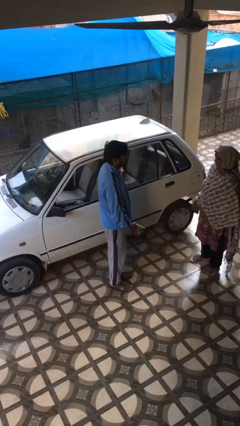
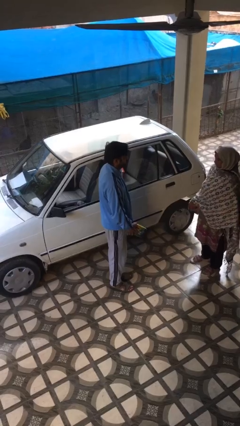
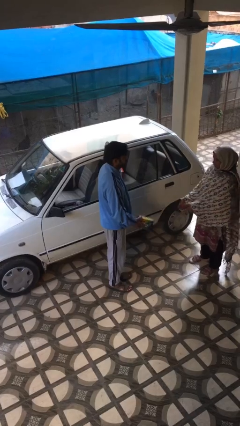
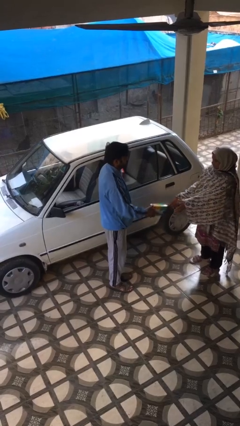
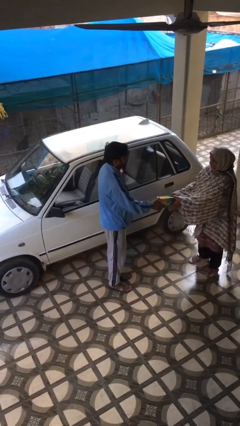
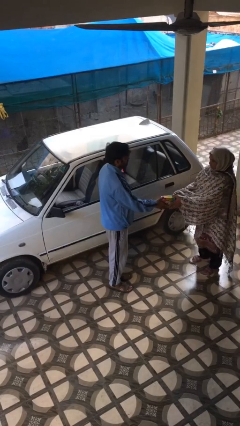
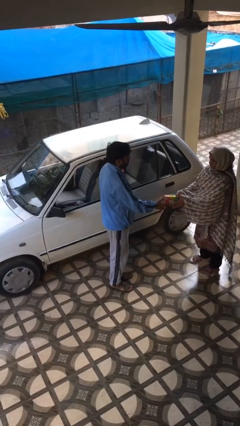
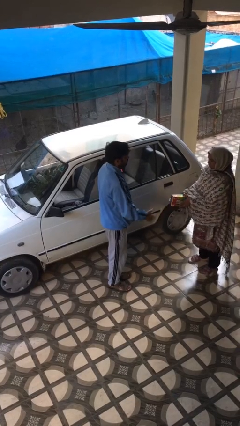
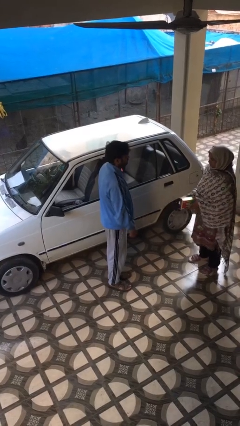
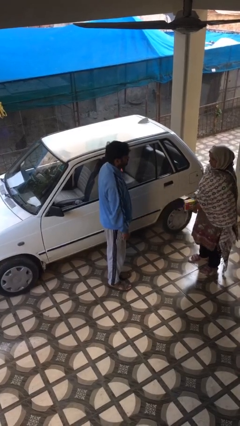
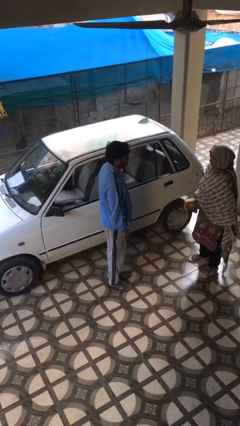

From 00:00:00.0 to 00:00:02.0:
person transfers object to person

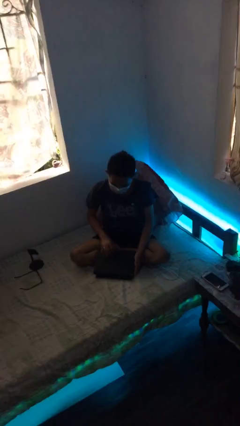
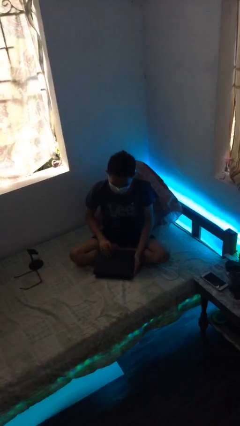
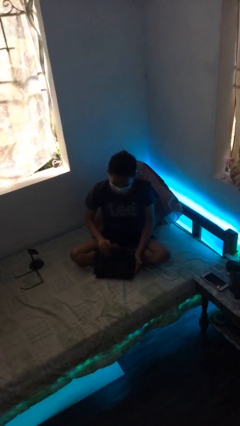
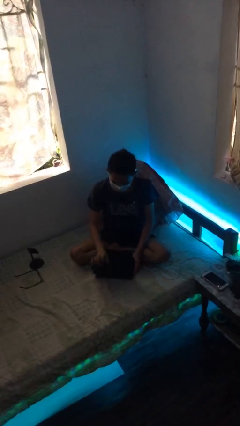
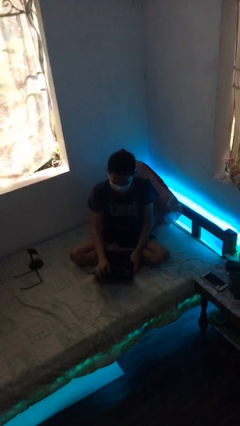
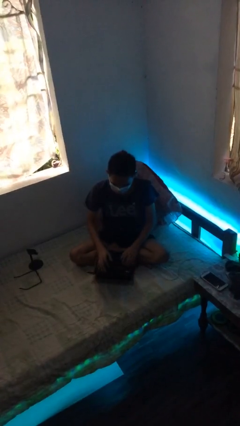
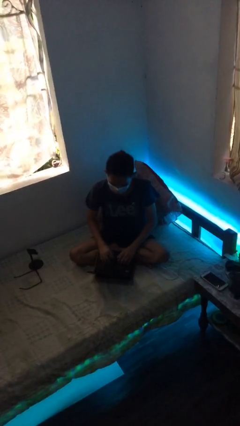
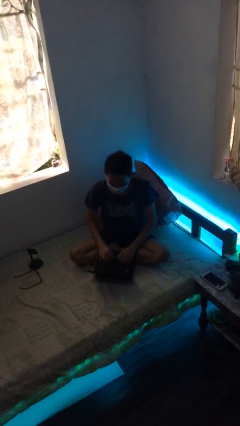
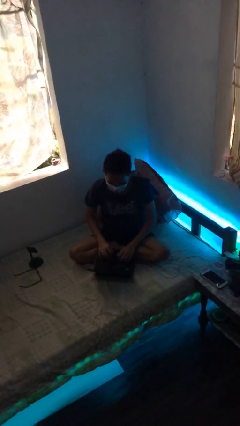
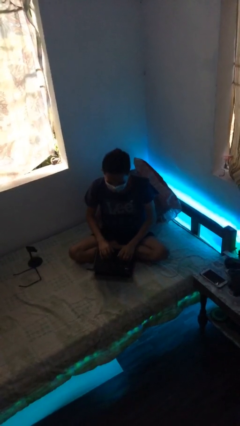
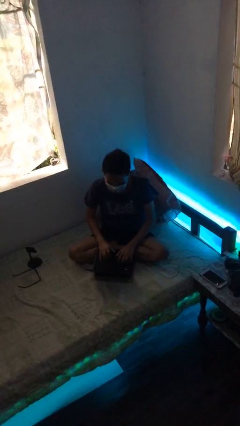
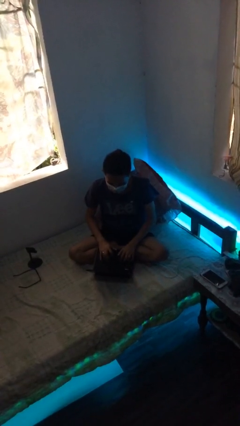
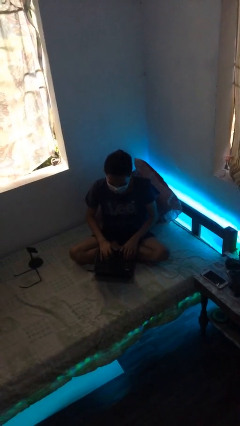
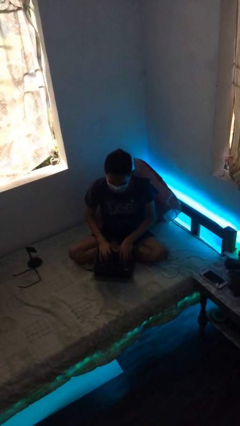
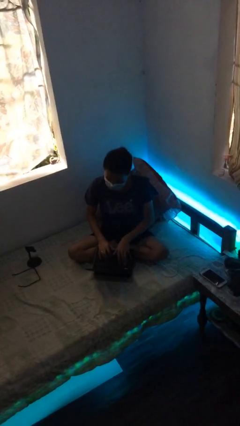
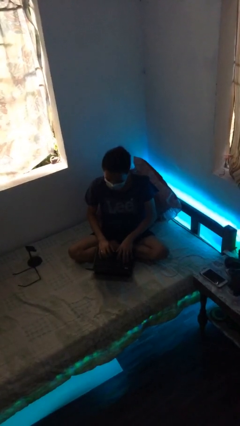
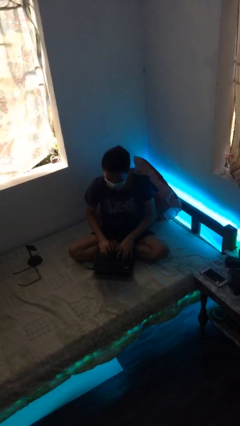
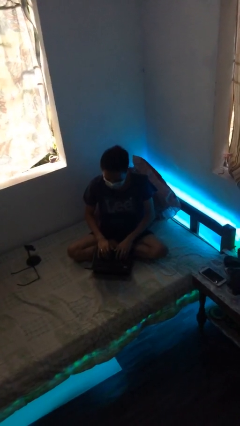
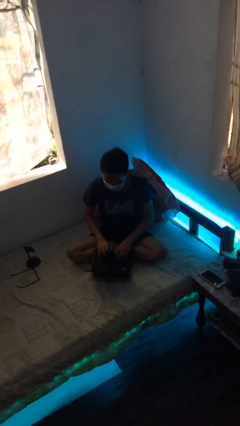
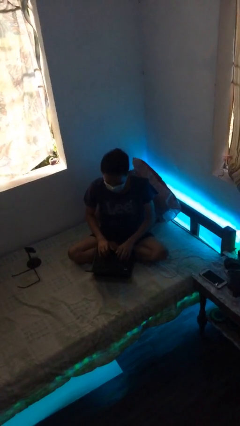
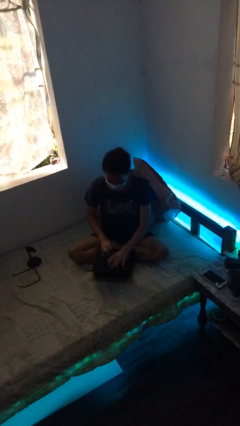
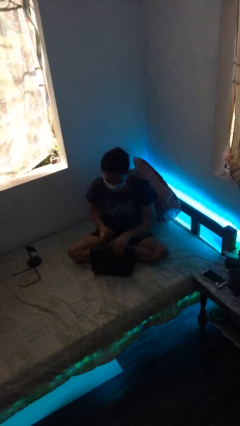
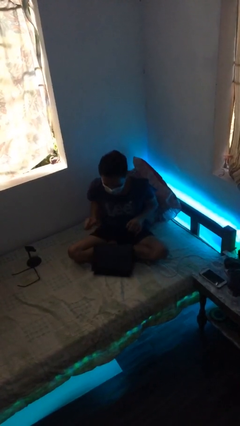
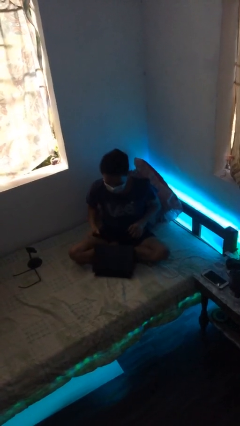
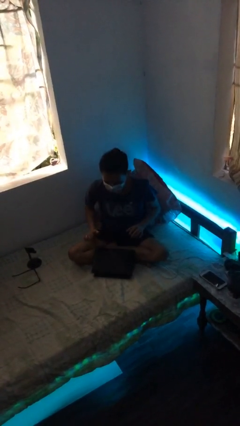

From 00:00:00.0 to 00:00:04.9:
person interacts with laptop

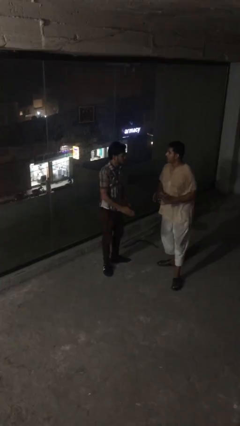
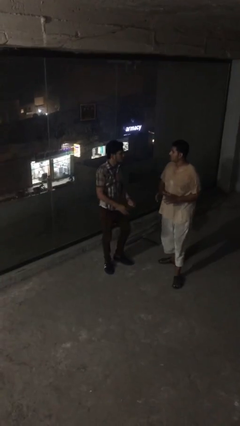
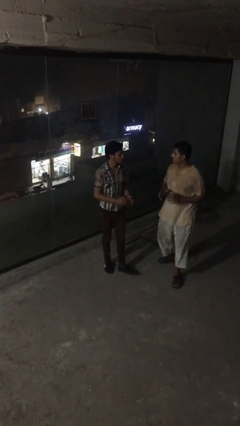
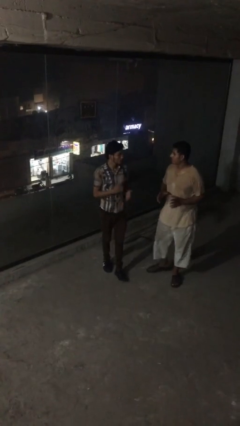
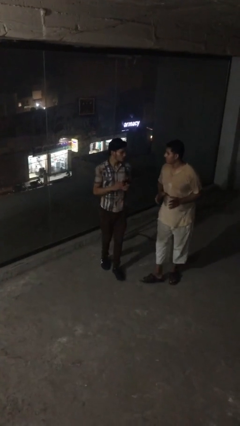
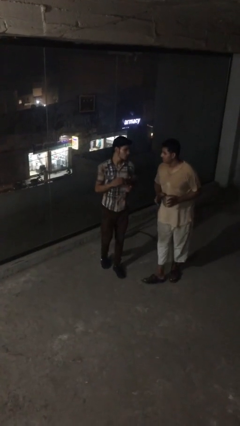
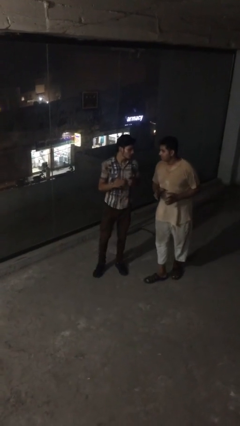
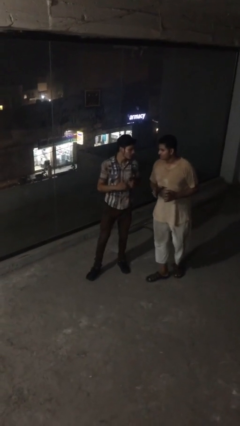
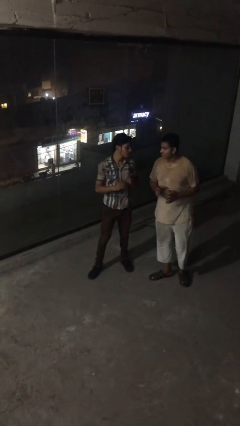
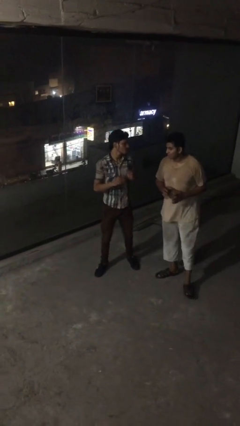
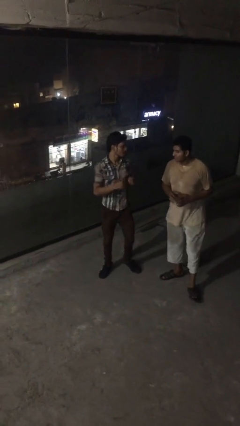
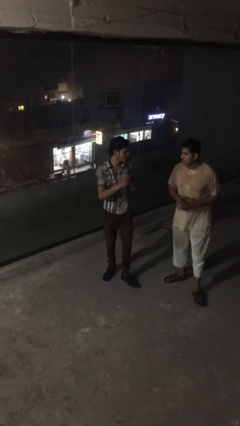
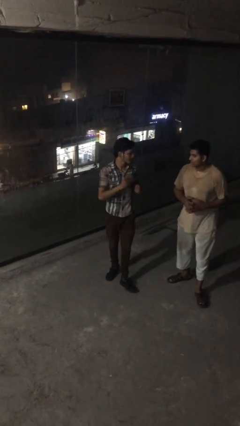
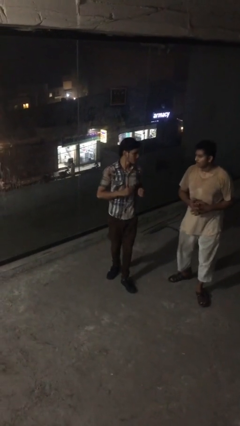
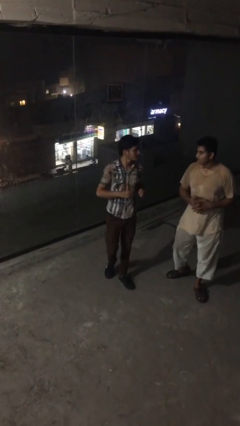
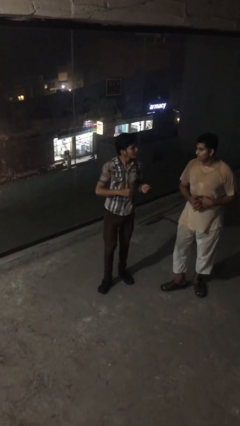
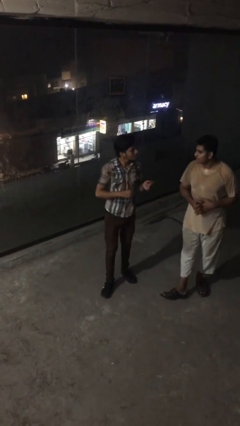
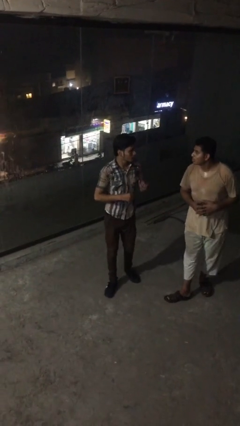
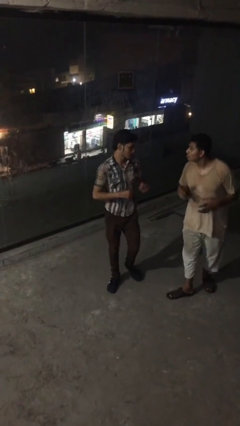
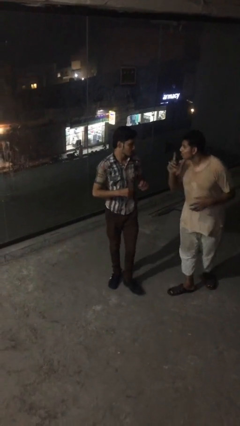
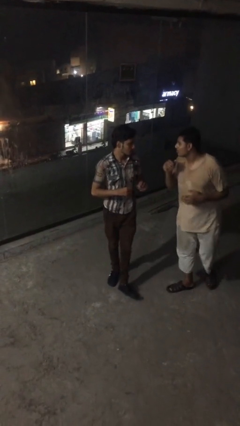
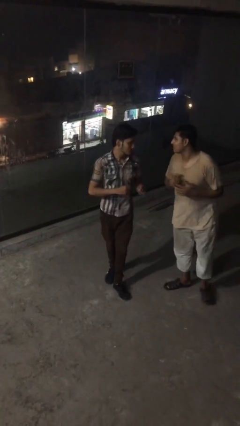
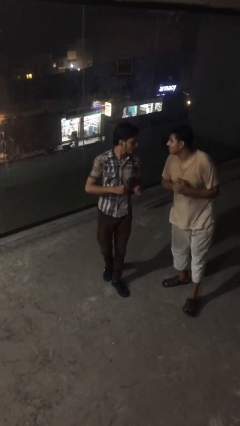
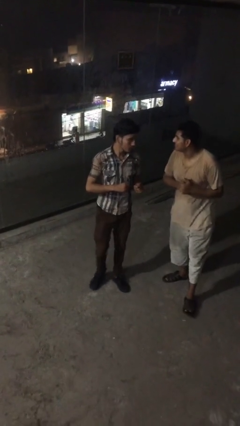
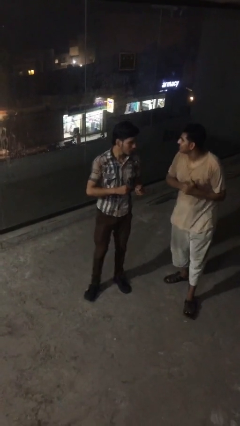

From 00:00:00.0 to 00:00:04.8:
person talks to person

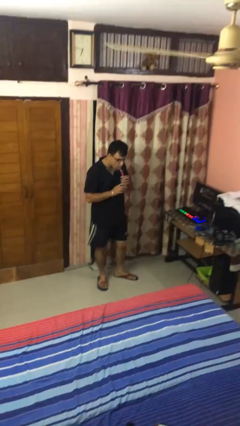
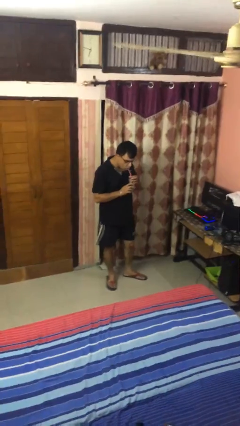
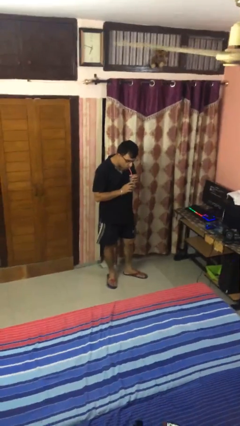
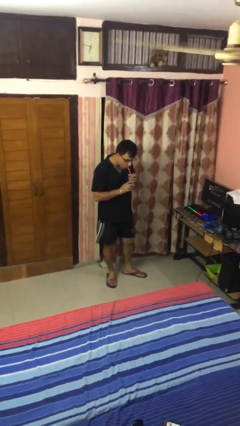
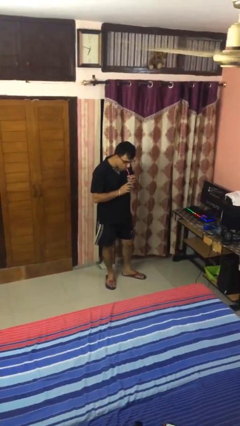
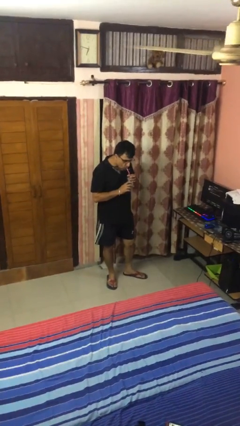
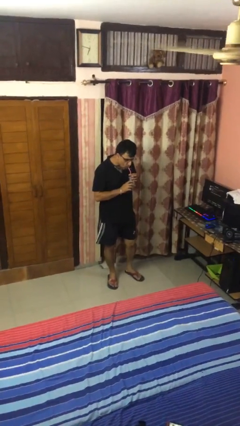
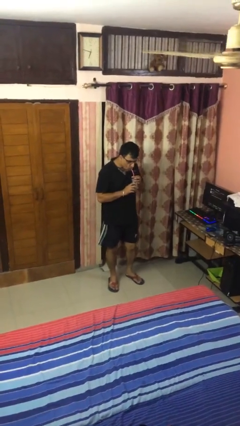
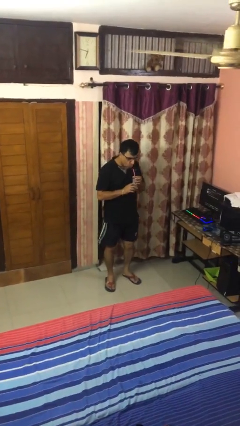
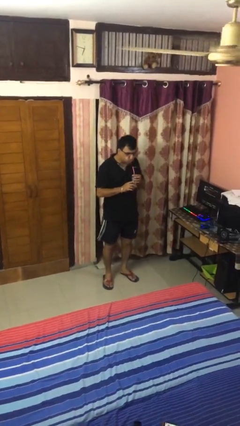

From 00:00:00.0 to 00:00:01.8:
person drinks from straw

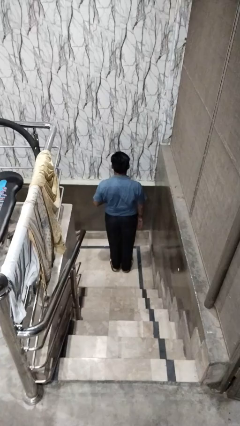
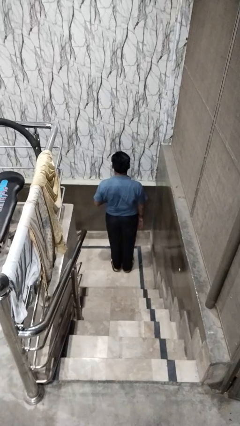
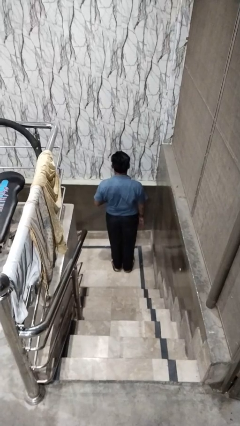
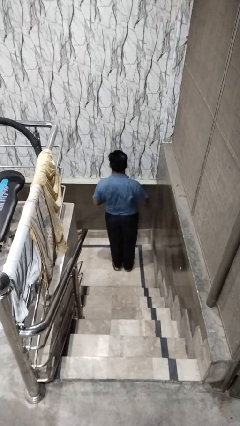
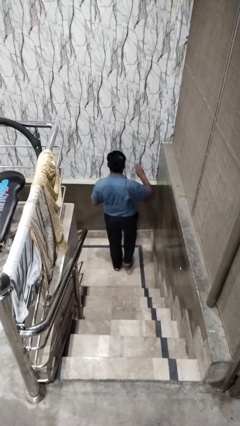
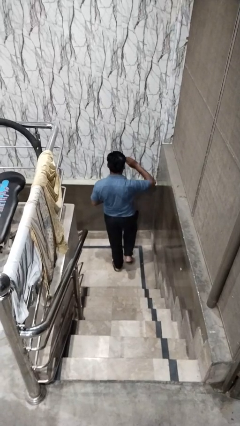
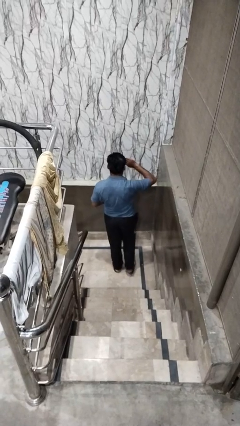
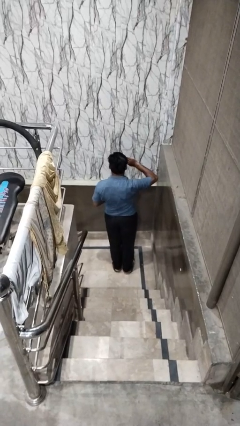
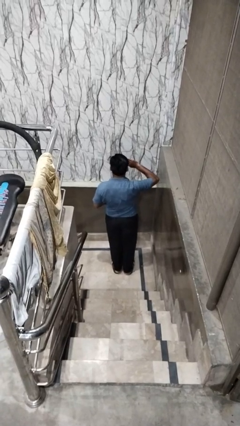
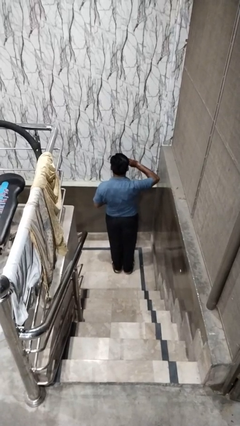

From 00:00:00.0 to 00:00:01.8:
person salutes

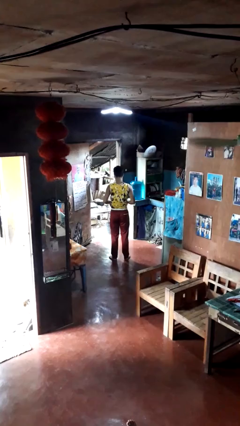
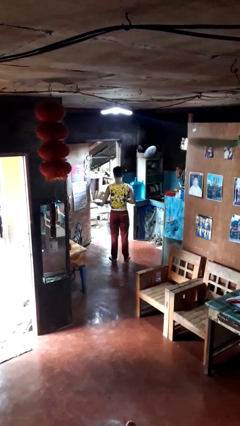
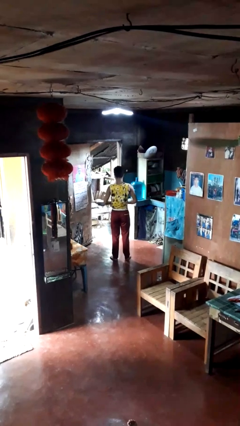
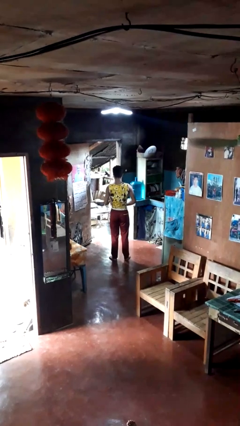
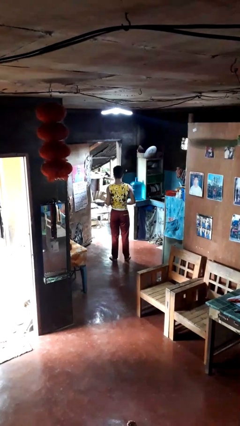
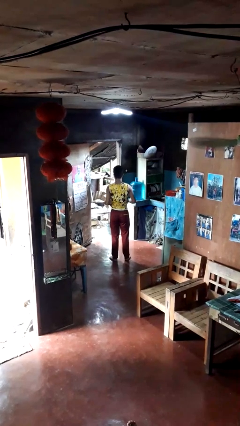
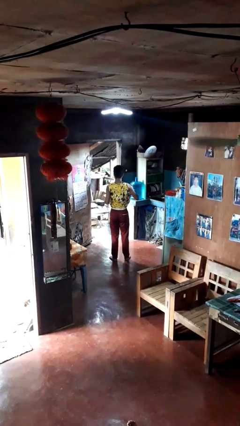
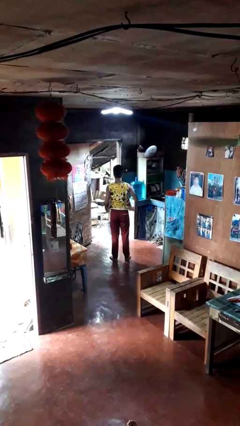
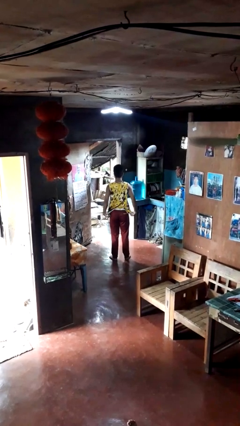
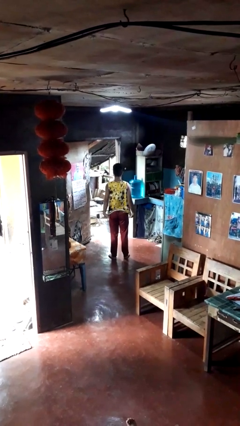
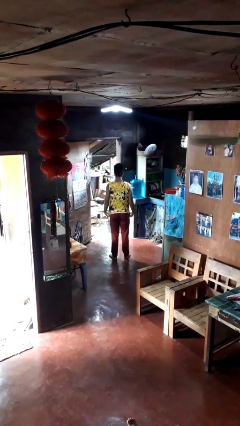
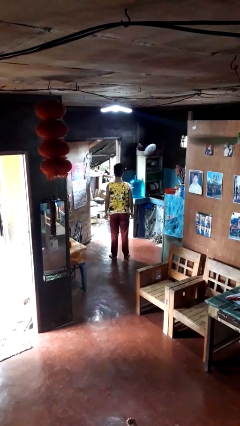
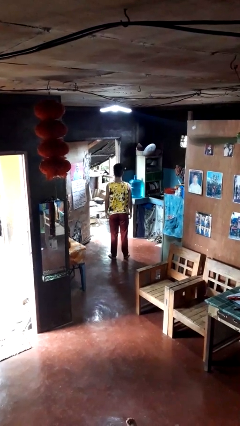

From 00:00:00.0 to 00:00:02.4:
person untucks shirt
